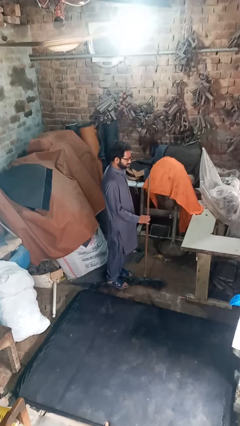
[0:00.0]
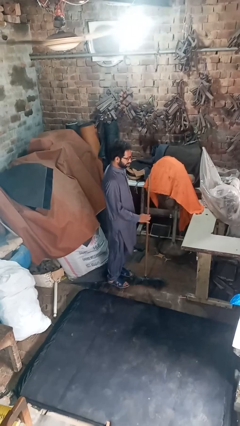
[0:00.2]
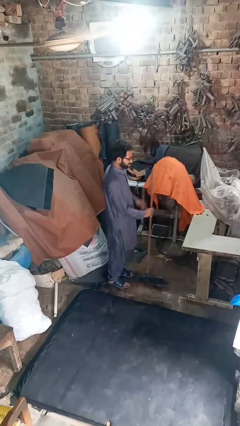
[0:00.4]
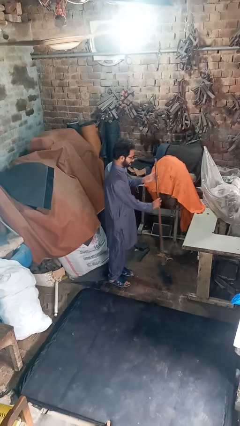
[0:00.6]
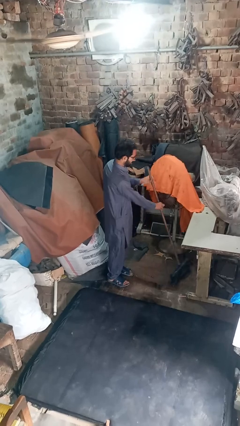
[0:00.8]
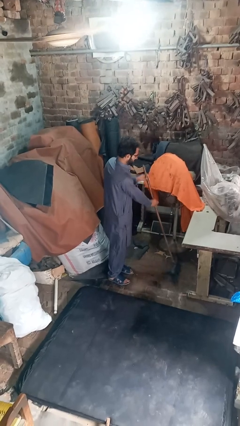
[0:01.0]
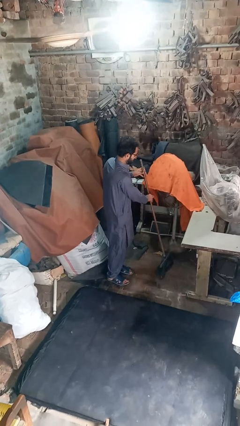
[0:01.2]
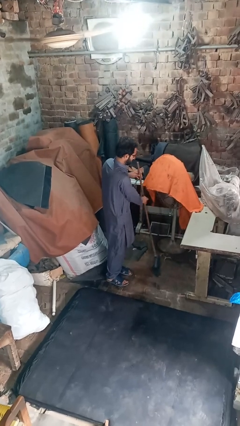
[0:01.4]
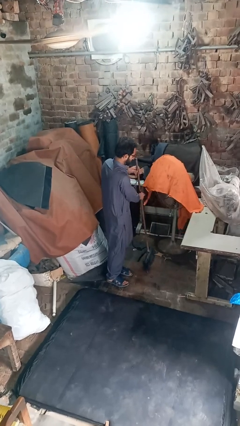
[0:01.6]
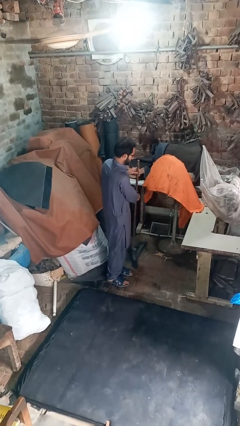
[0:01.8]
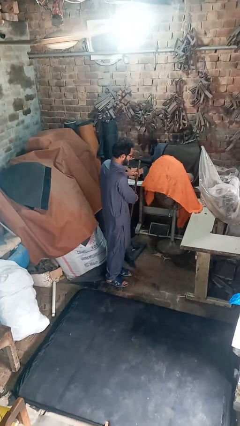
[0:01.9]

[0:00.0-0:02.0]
person sweeps floor

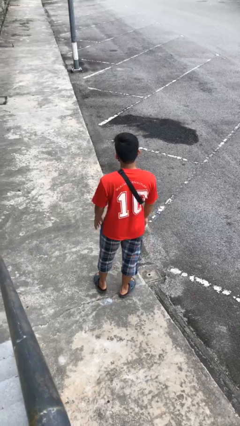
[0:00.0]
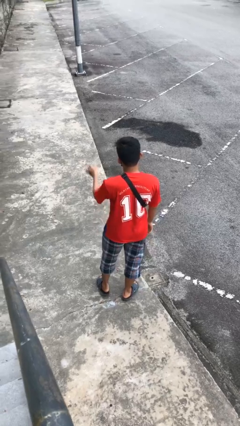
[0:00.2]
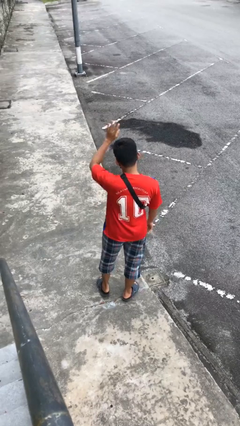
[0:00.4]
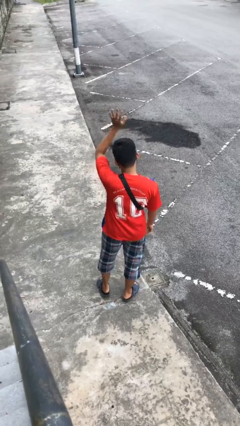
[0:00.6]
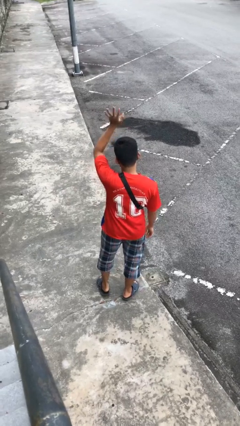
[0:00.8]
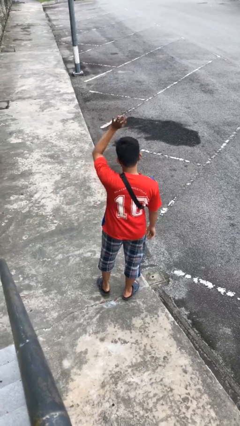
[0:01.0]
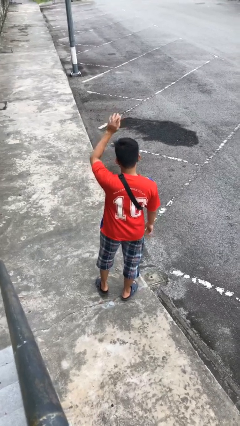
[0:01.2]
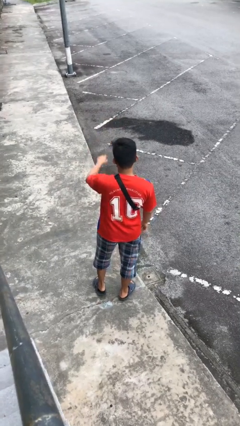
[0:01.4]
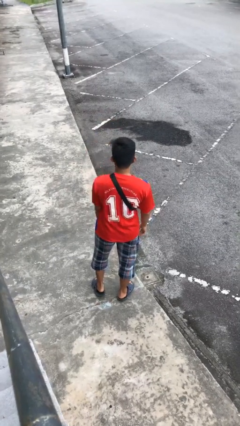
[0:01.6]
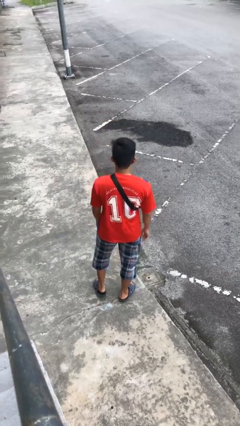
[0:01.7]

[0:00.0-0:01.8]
person waves at person

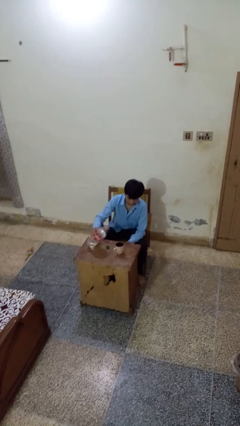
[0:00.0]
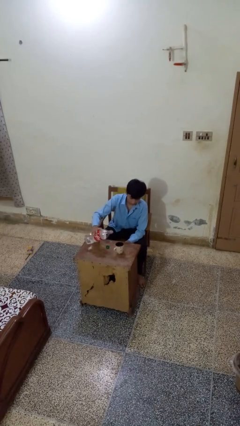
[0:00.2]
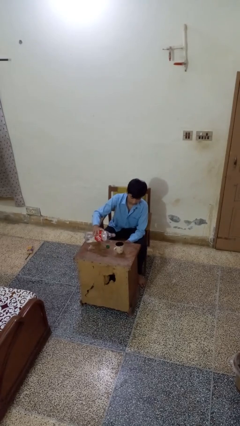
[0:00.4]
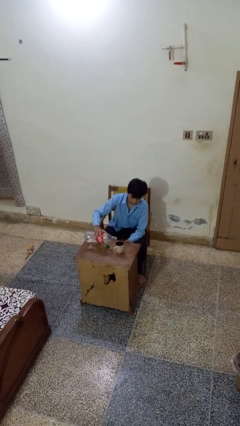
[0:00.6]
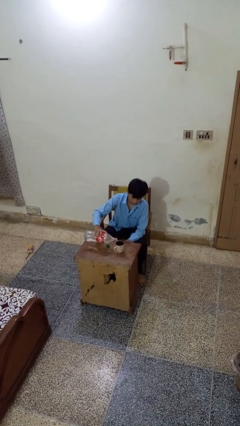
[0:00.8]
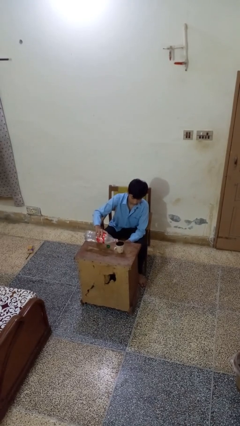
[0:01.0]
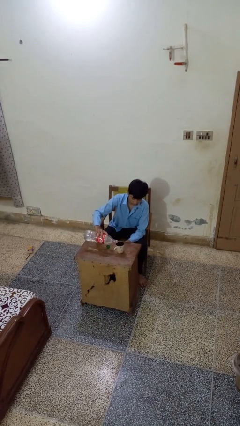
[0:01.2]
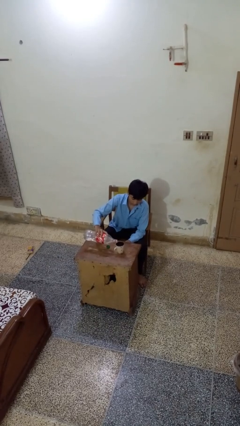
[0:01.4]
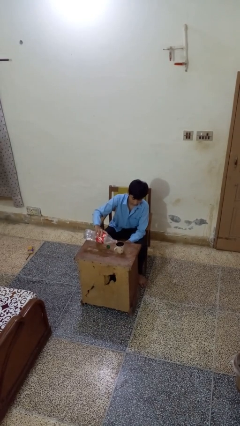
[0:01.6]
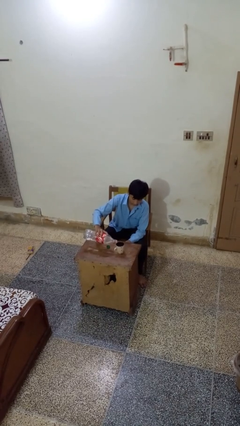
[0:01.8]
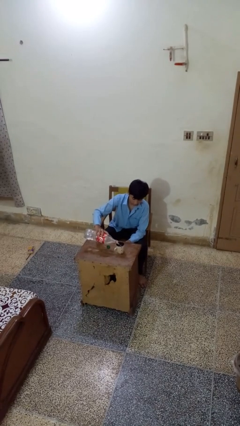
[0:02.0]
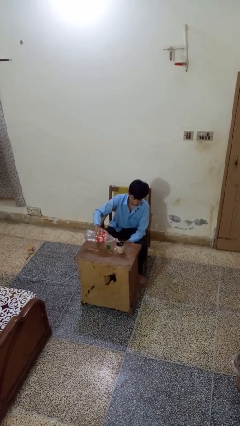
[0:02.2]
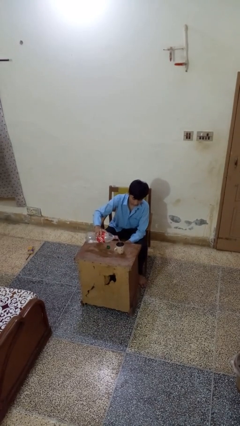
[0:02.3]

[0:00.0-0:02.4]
person pours liquid into cup

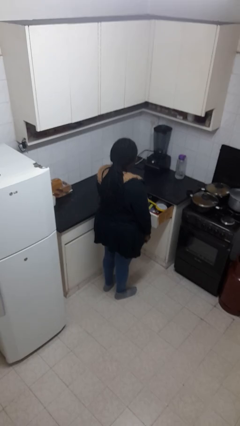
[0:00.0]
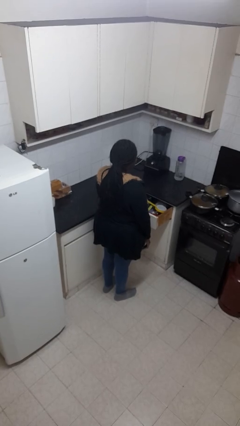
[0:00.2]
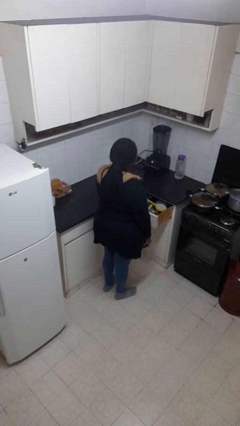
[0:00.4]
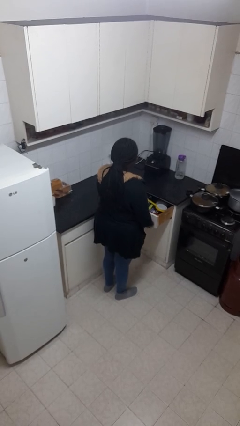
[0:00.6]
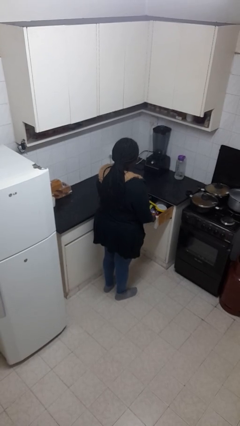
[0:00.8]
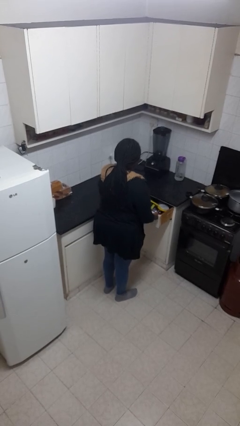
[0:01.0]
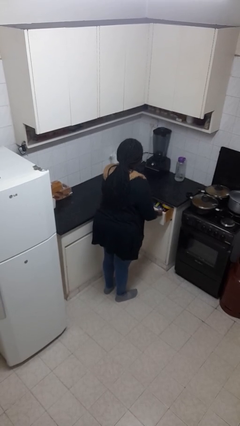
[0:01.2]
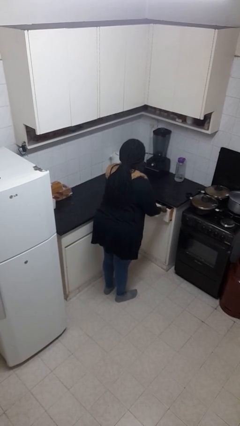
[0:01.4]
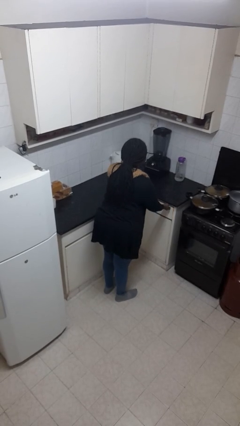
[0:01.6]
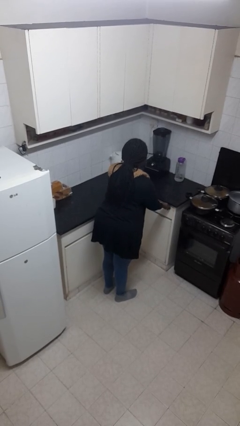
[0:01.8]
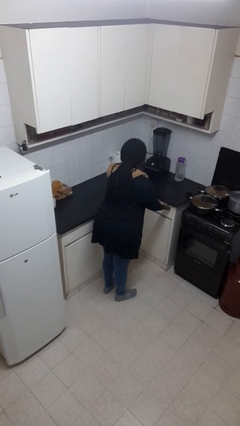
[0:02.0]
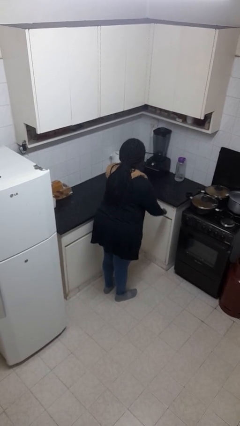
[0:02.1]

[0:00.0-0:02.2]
person closes kitchen drawer

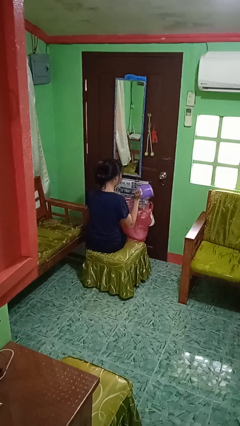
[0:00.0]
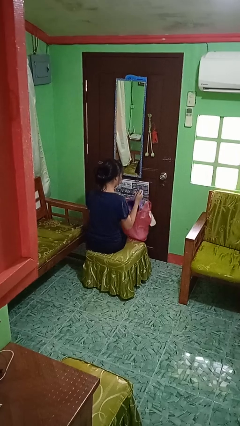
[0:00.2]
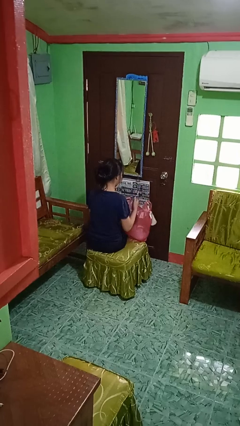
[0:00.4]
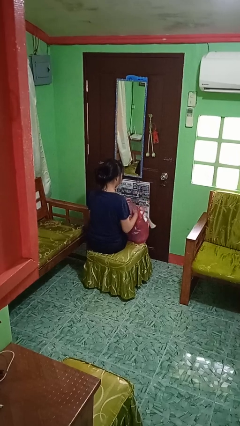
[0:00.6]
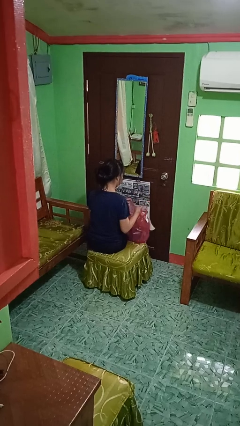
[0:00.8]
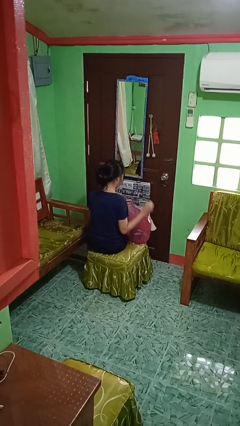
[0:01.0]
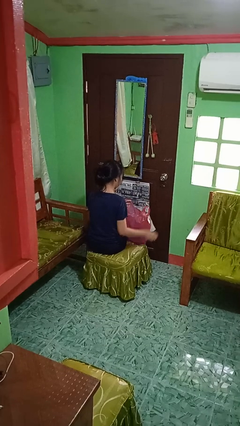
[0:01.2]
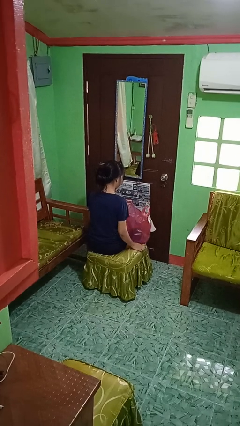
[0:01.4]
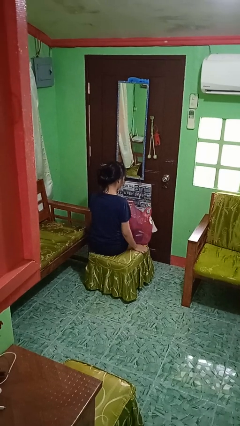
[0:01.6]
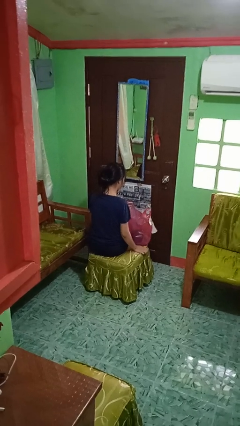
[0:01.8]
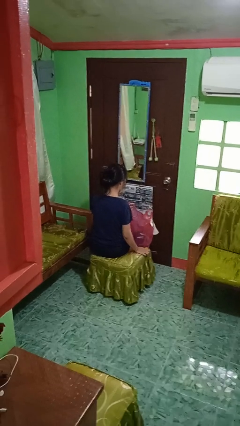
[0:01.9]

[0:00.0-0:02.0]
person puts object into bag

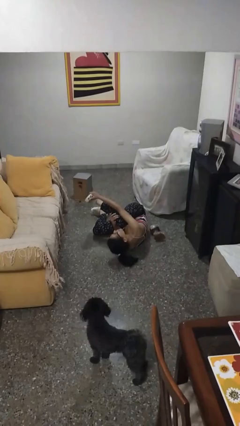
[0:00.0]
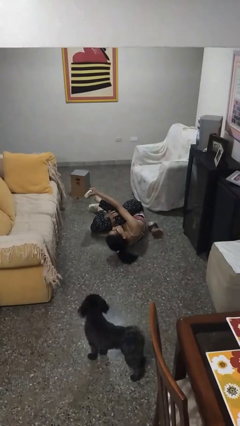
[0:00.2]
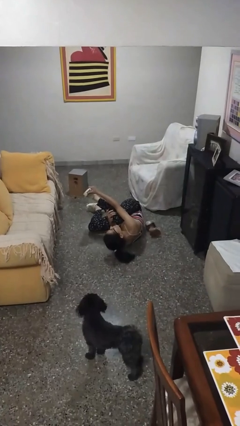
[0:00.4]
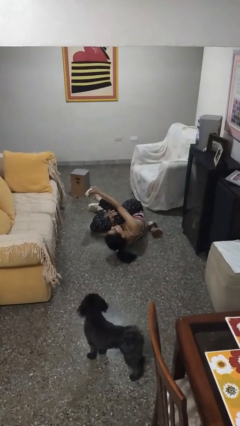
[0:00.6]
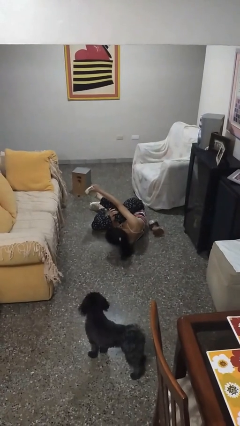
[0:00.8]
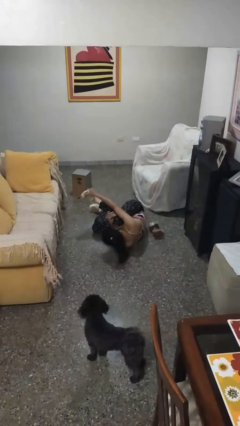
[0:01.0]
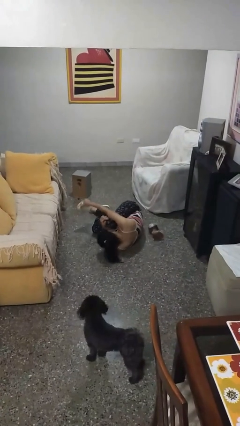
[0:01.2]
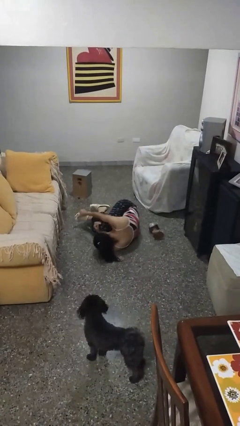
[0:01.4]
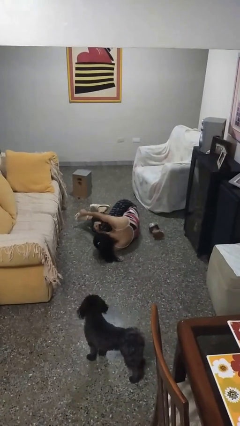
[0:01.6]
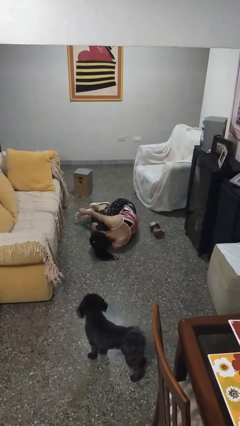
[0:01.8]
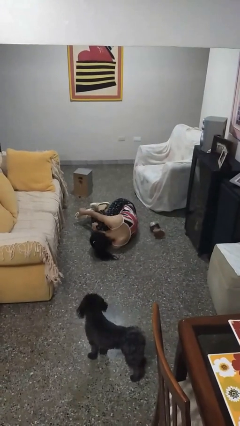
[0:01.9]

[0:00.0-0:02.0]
person lies down on floor

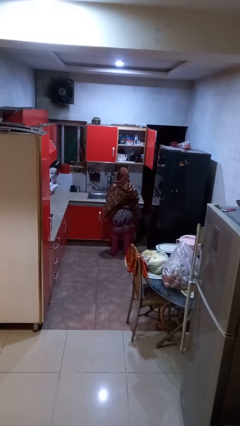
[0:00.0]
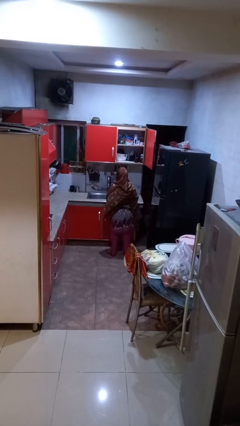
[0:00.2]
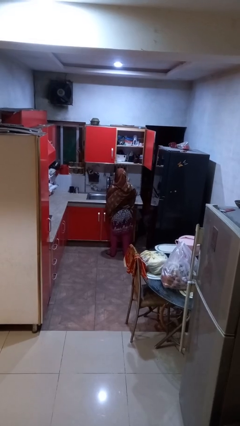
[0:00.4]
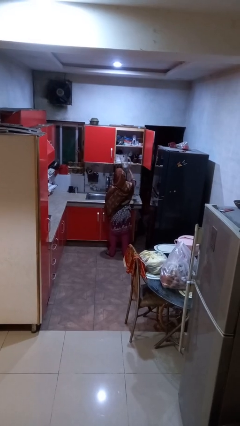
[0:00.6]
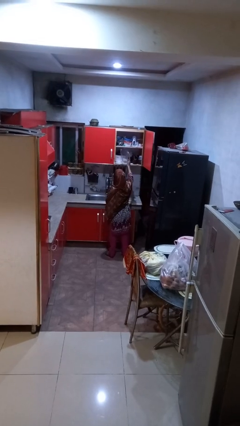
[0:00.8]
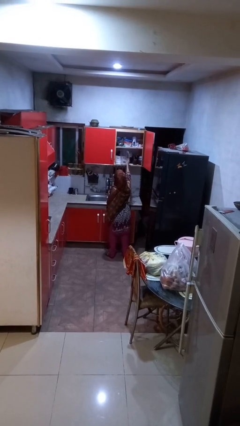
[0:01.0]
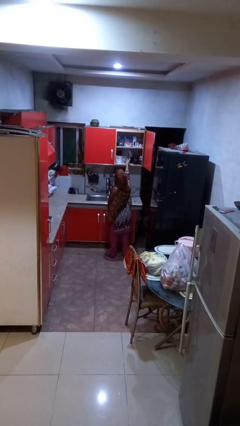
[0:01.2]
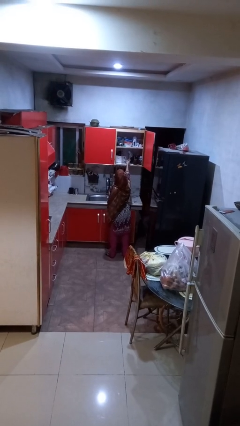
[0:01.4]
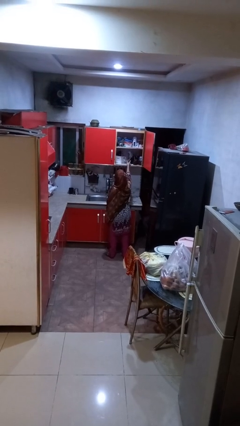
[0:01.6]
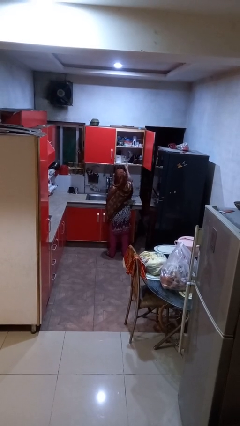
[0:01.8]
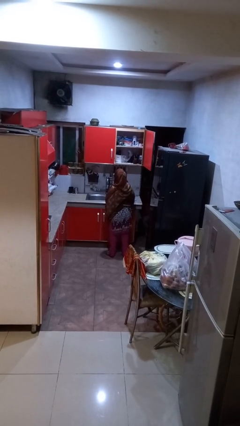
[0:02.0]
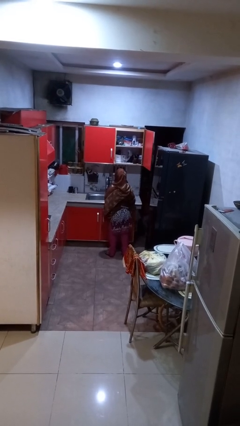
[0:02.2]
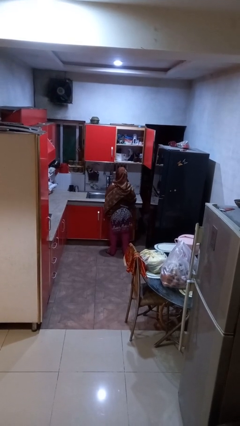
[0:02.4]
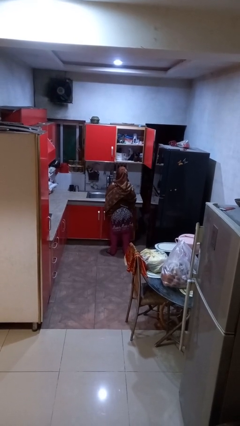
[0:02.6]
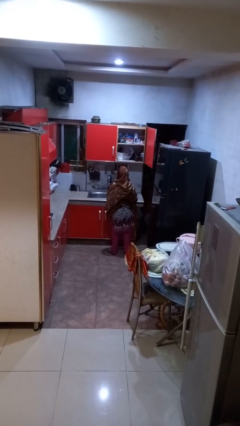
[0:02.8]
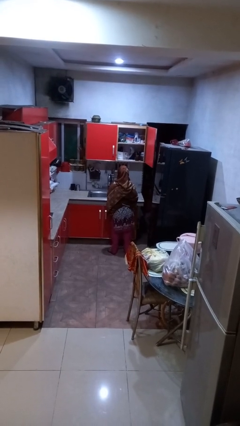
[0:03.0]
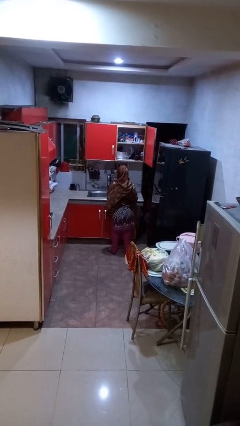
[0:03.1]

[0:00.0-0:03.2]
person puts object in cabinet

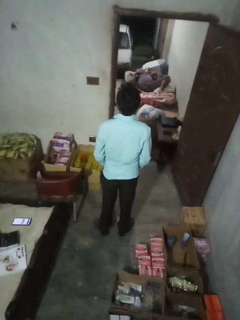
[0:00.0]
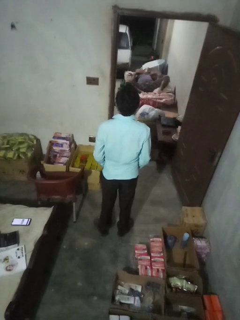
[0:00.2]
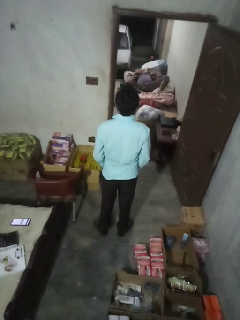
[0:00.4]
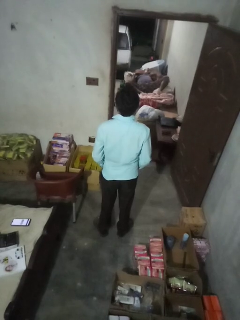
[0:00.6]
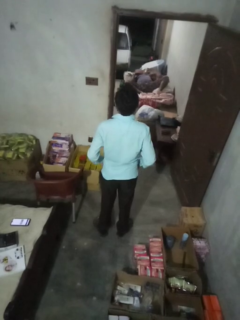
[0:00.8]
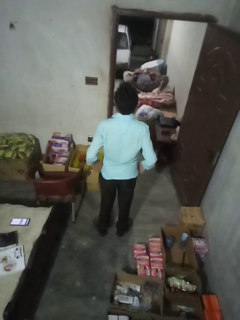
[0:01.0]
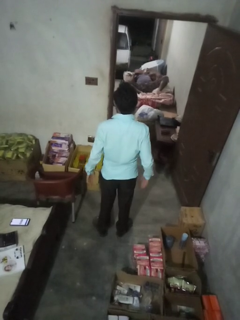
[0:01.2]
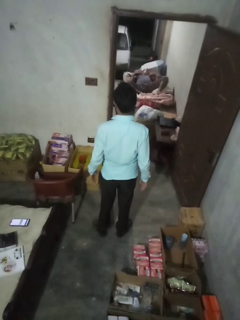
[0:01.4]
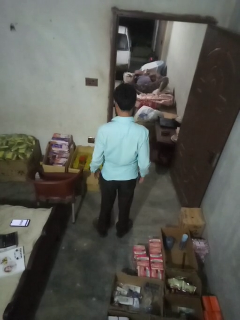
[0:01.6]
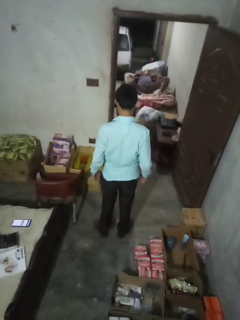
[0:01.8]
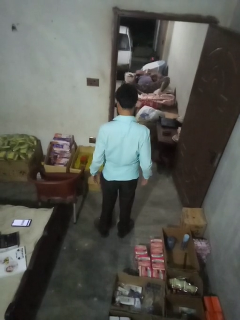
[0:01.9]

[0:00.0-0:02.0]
person puts hands in back pockets
